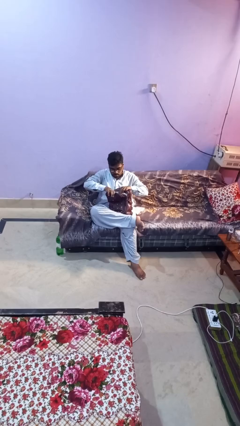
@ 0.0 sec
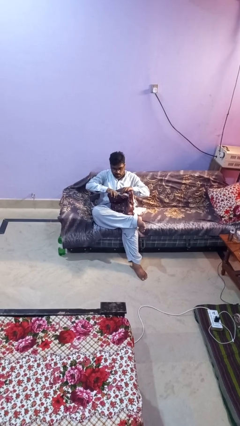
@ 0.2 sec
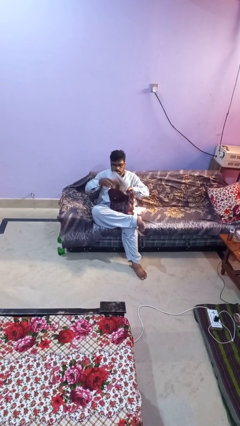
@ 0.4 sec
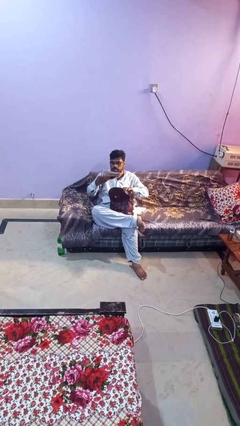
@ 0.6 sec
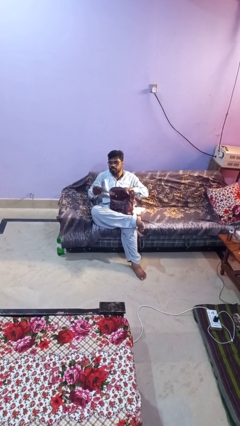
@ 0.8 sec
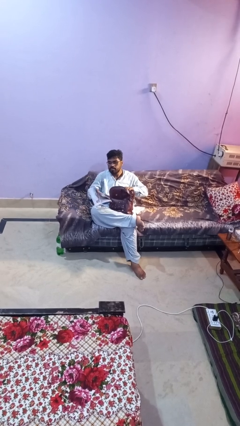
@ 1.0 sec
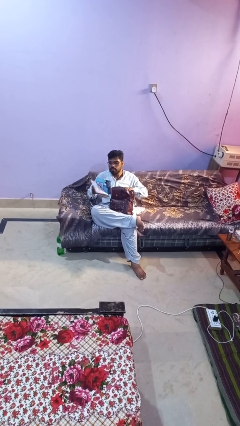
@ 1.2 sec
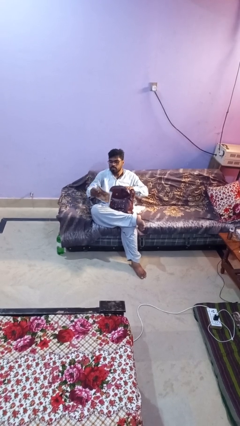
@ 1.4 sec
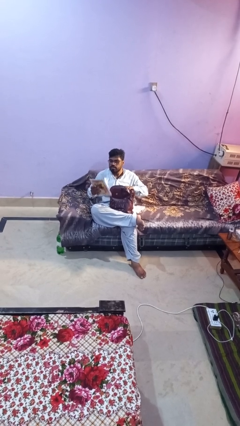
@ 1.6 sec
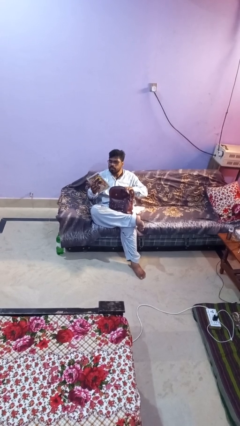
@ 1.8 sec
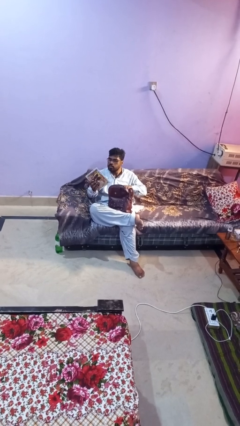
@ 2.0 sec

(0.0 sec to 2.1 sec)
person takes object from backpack

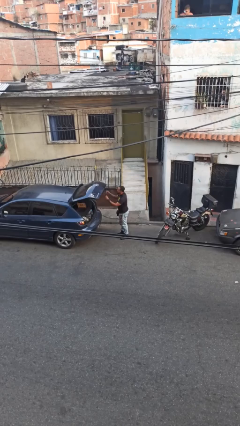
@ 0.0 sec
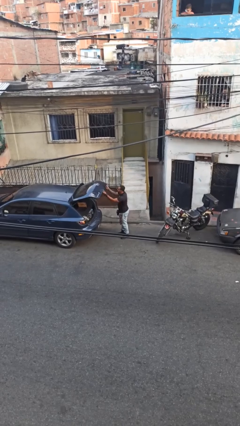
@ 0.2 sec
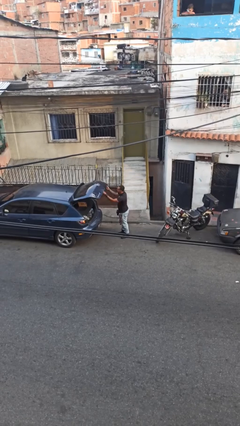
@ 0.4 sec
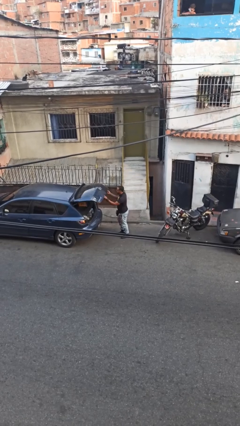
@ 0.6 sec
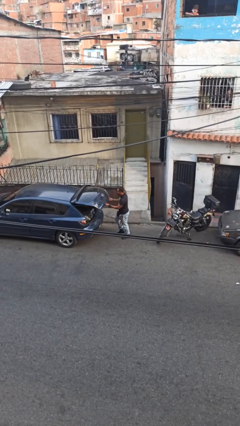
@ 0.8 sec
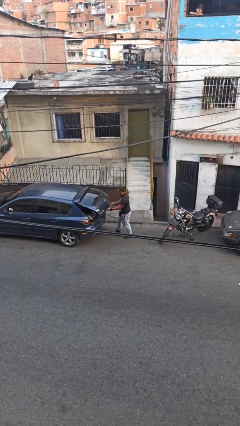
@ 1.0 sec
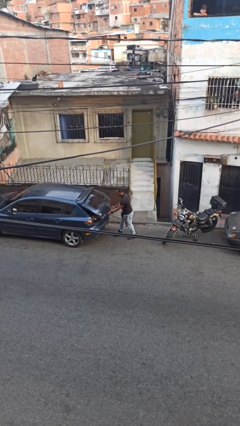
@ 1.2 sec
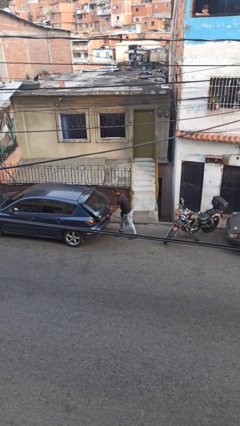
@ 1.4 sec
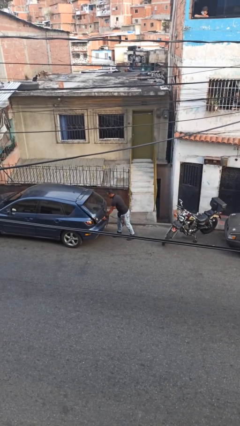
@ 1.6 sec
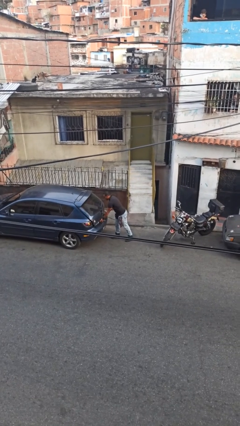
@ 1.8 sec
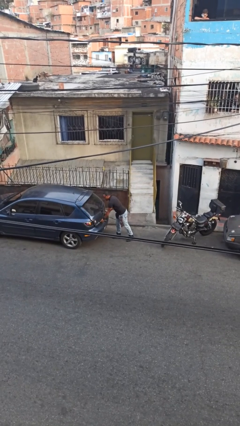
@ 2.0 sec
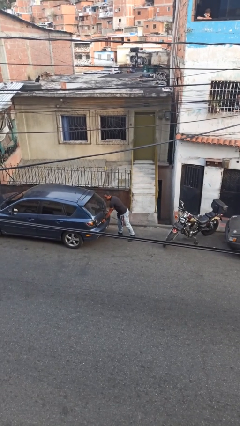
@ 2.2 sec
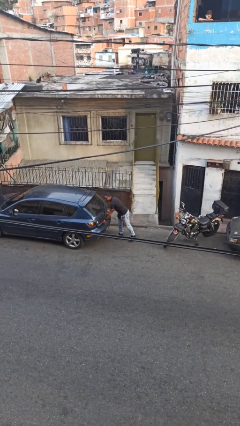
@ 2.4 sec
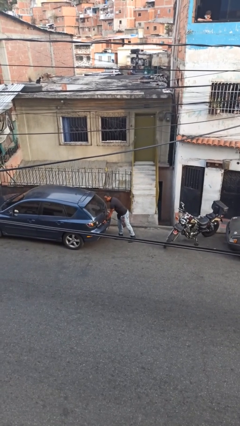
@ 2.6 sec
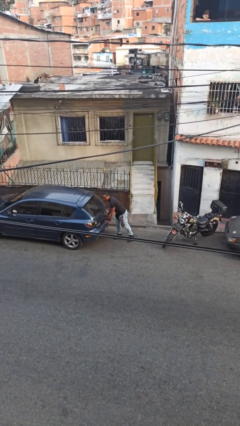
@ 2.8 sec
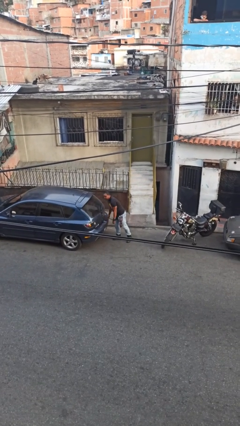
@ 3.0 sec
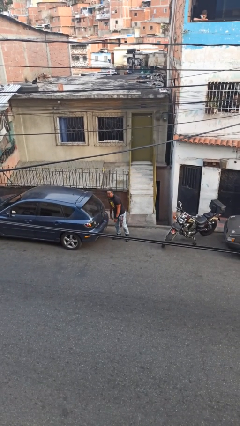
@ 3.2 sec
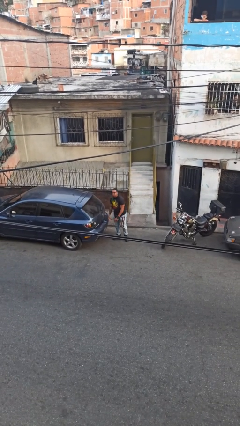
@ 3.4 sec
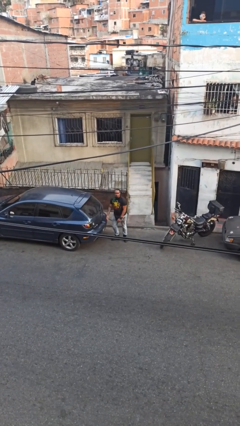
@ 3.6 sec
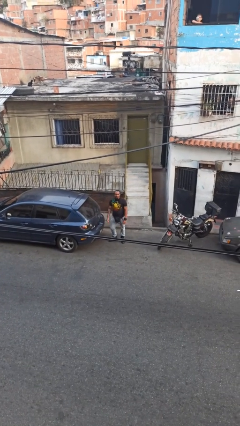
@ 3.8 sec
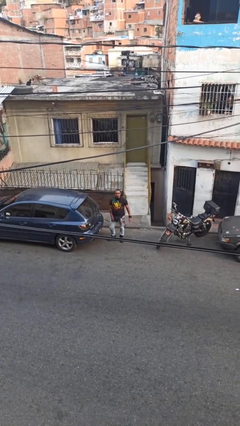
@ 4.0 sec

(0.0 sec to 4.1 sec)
person closes car trunk

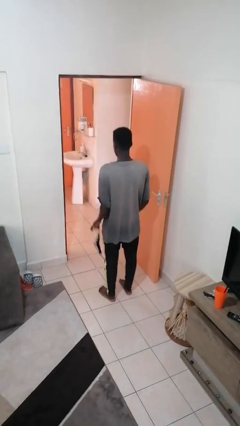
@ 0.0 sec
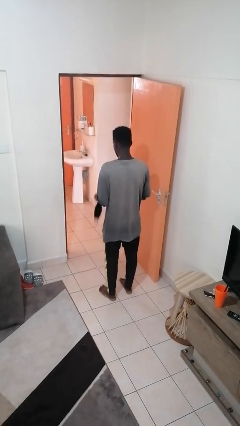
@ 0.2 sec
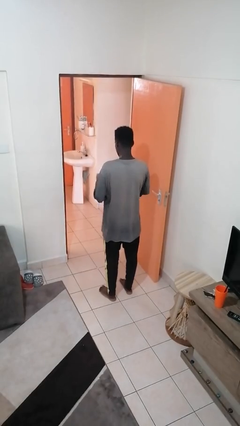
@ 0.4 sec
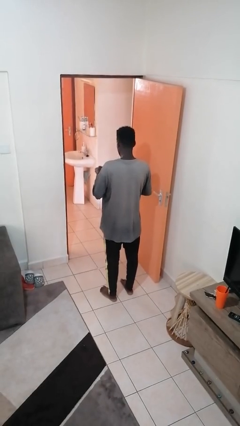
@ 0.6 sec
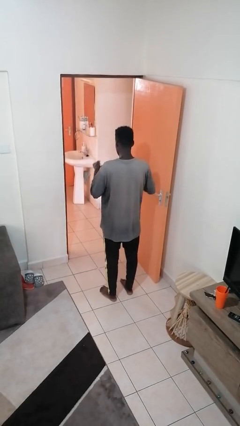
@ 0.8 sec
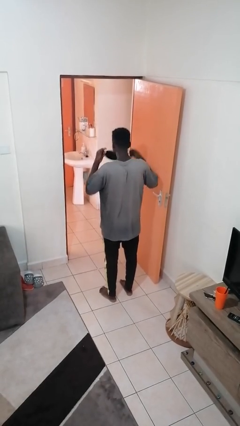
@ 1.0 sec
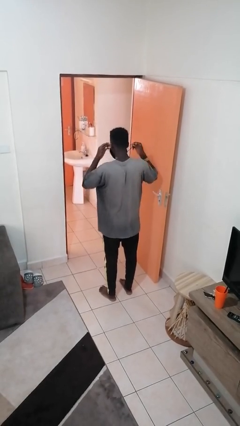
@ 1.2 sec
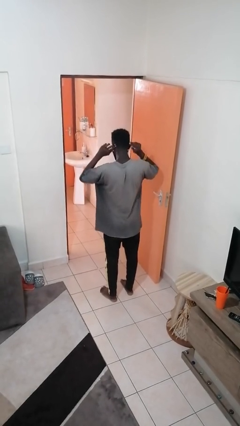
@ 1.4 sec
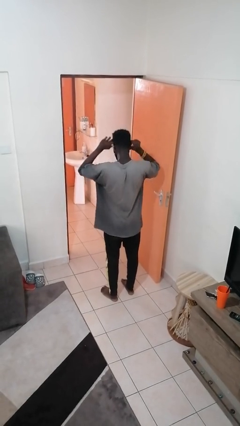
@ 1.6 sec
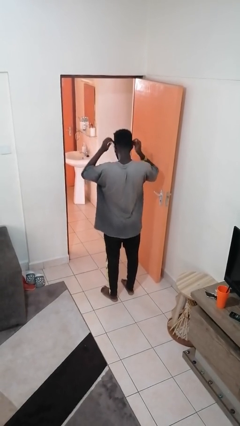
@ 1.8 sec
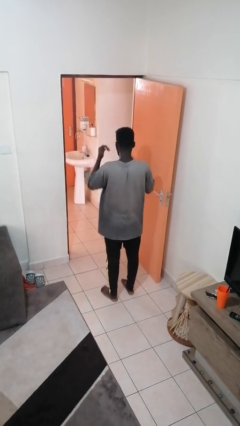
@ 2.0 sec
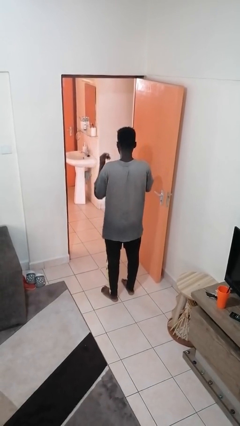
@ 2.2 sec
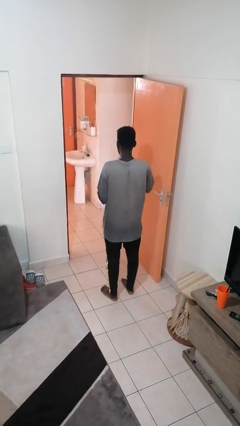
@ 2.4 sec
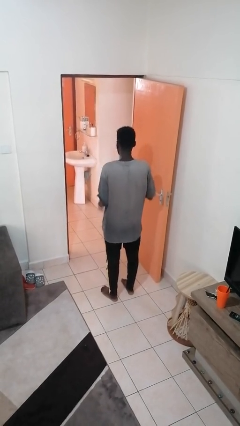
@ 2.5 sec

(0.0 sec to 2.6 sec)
person puts on facemask

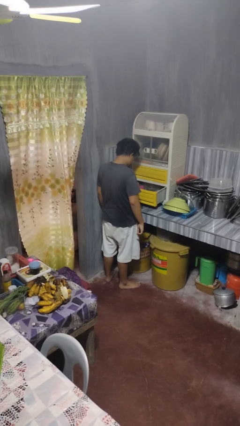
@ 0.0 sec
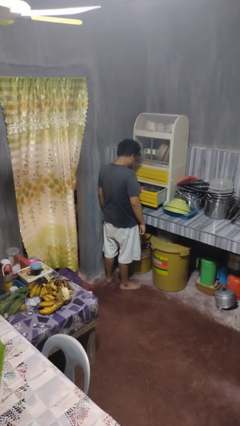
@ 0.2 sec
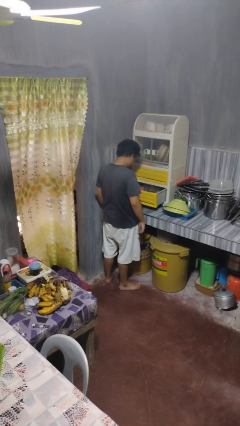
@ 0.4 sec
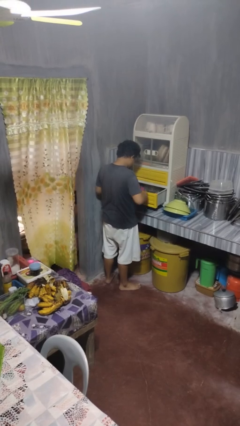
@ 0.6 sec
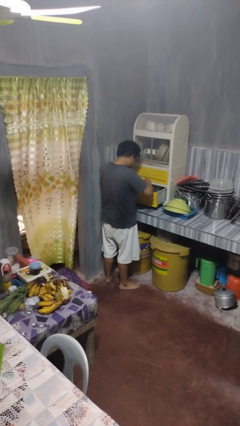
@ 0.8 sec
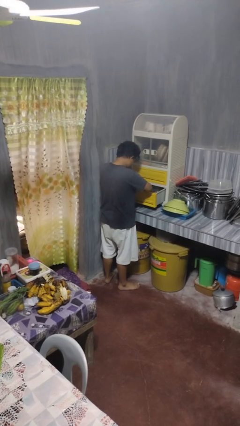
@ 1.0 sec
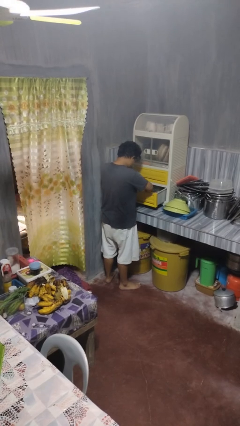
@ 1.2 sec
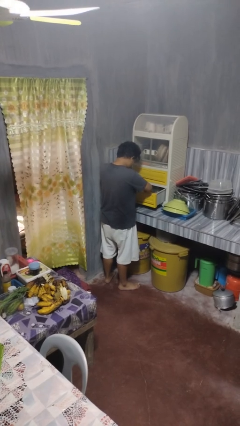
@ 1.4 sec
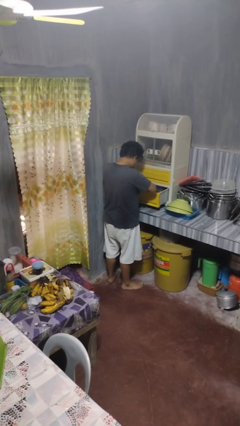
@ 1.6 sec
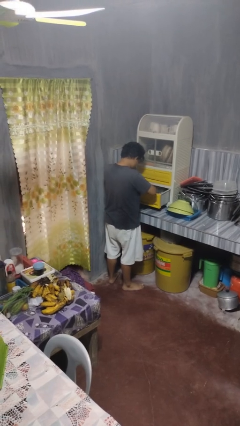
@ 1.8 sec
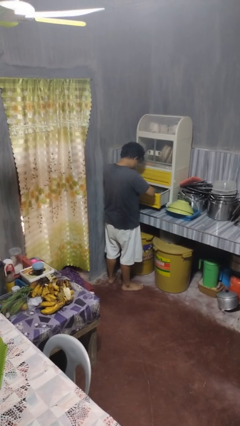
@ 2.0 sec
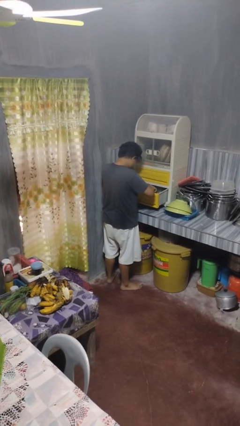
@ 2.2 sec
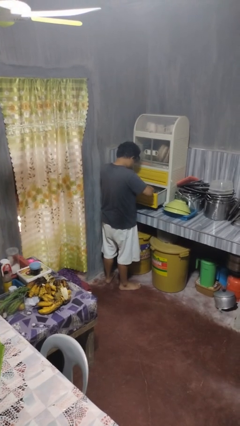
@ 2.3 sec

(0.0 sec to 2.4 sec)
person searches in kitchen drawer

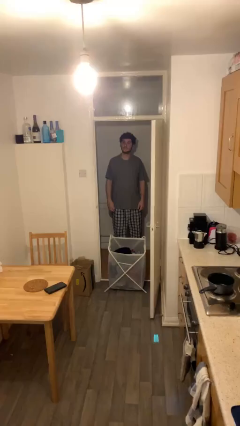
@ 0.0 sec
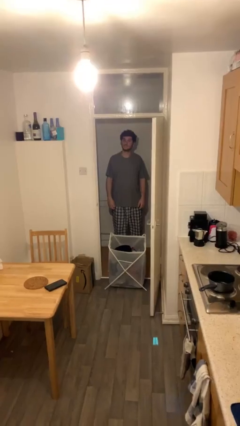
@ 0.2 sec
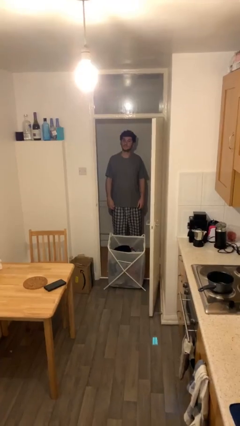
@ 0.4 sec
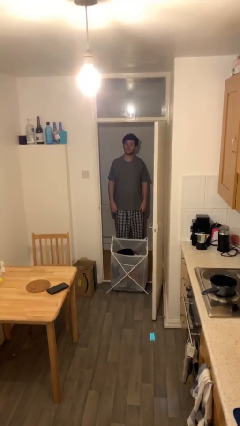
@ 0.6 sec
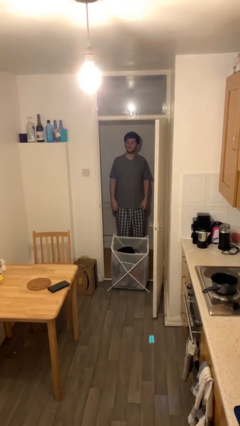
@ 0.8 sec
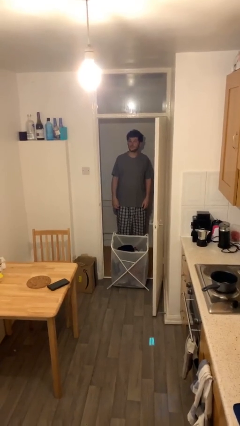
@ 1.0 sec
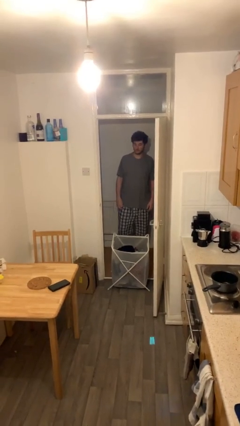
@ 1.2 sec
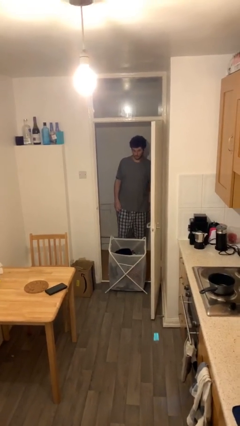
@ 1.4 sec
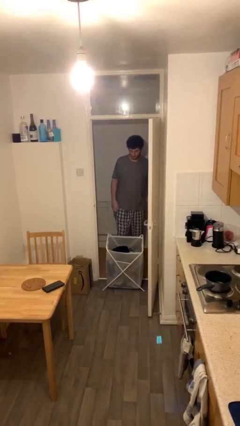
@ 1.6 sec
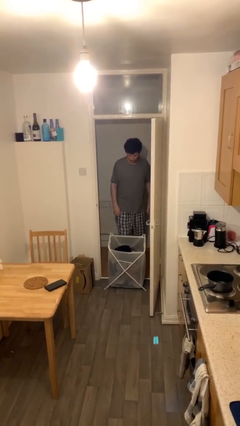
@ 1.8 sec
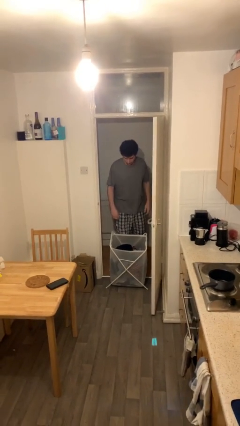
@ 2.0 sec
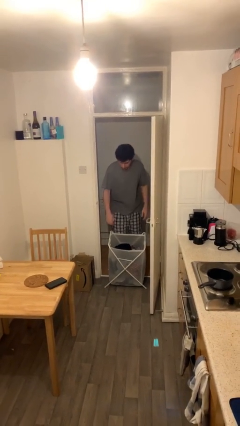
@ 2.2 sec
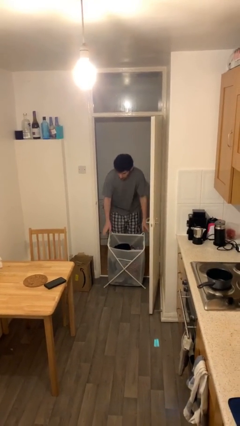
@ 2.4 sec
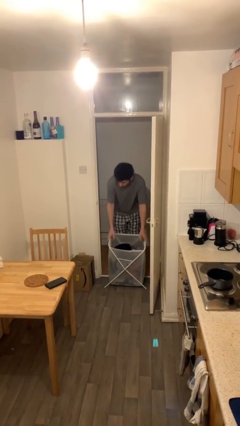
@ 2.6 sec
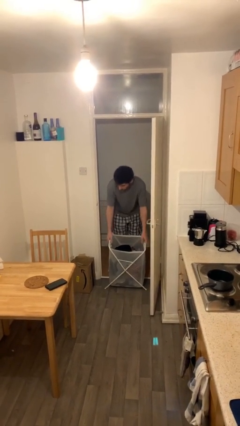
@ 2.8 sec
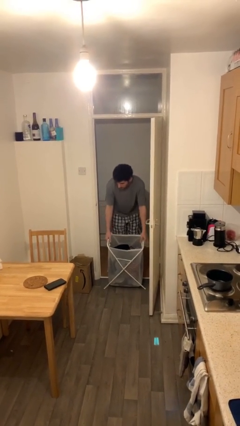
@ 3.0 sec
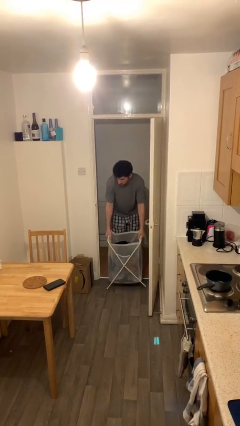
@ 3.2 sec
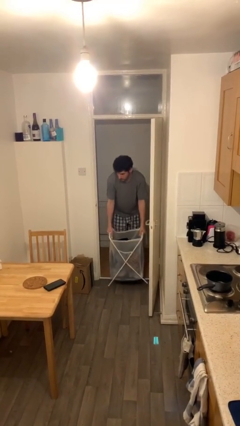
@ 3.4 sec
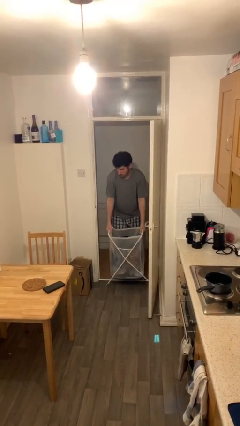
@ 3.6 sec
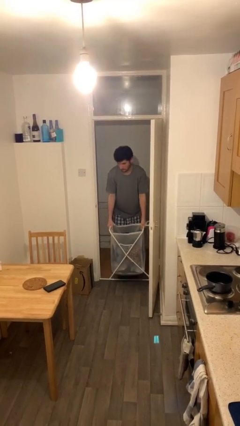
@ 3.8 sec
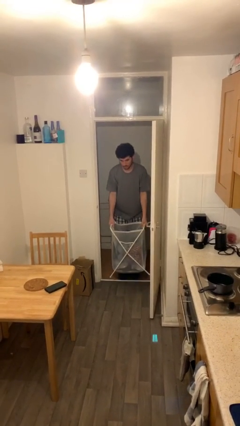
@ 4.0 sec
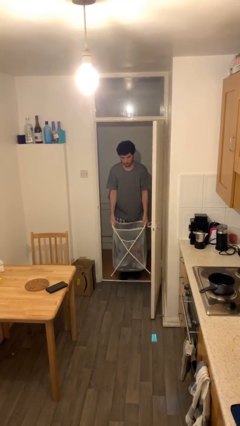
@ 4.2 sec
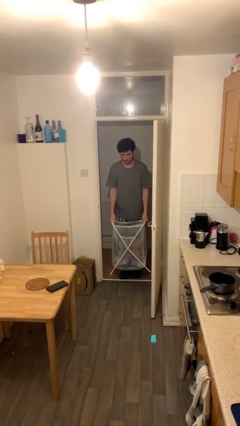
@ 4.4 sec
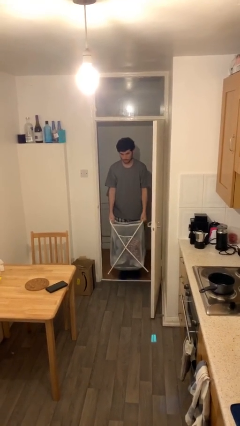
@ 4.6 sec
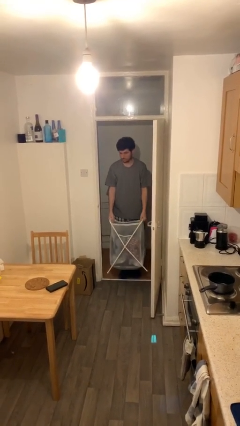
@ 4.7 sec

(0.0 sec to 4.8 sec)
person picks up object from floor

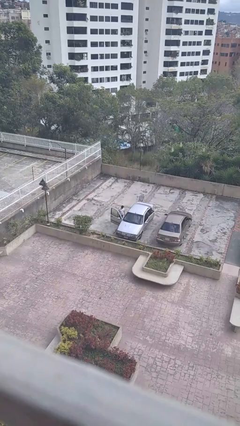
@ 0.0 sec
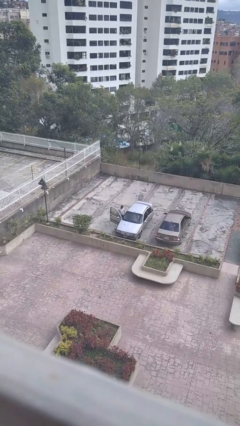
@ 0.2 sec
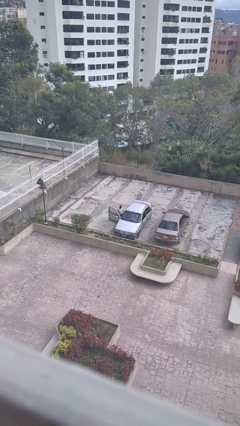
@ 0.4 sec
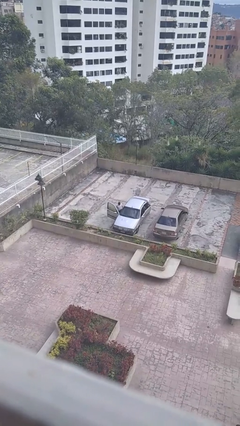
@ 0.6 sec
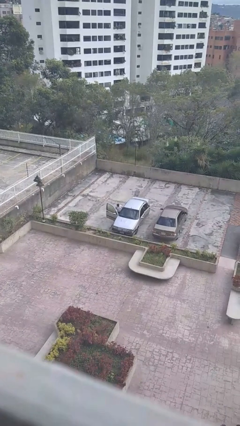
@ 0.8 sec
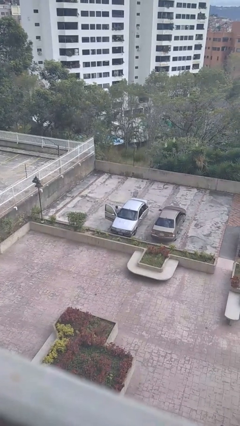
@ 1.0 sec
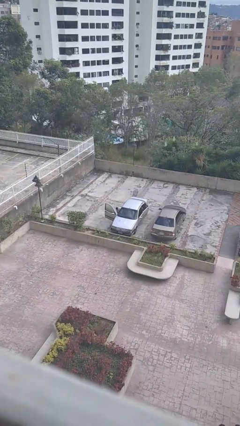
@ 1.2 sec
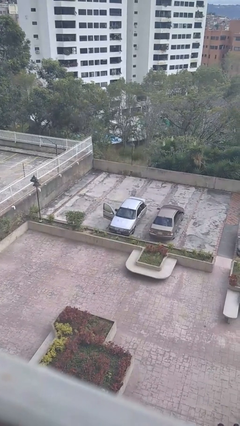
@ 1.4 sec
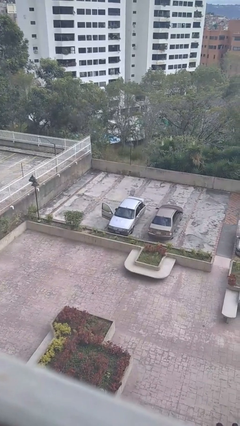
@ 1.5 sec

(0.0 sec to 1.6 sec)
person enters car
